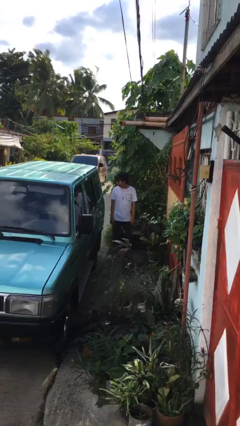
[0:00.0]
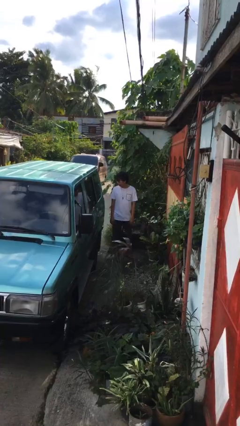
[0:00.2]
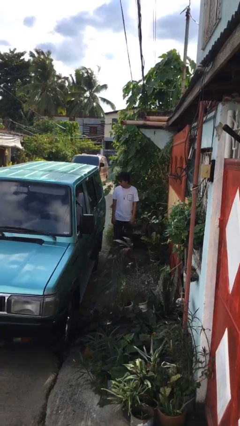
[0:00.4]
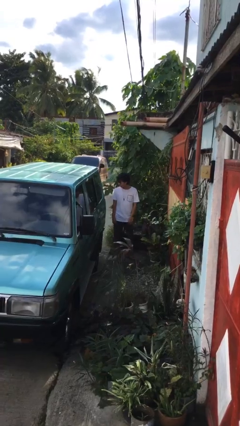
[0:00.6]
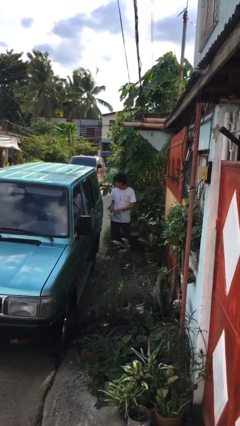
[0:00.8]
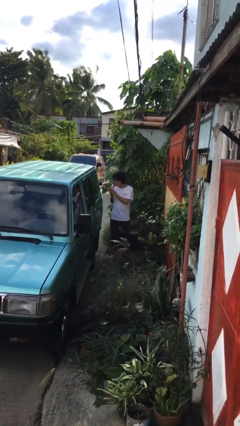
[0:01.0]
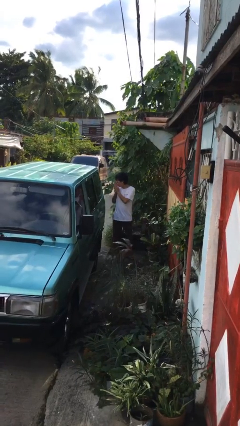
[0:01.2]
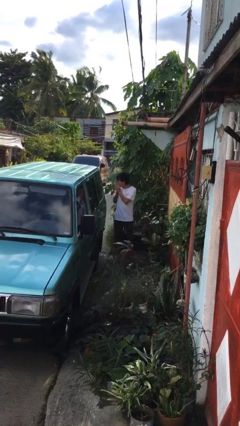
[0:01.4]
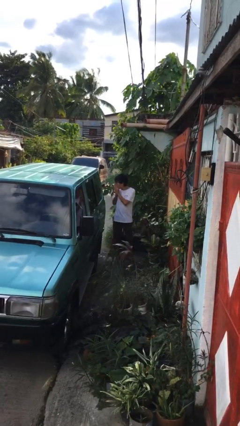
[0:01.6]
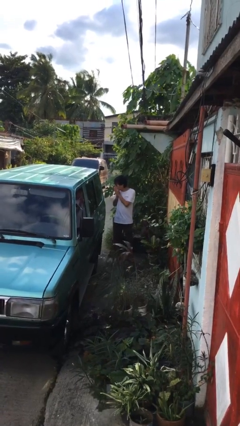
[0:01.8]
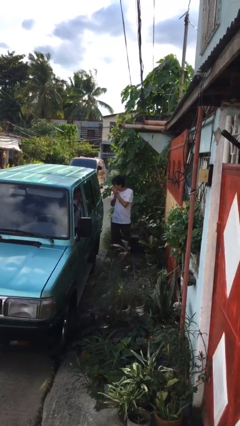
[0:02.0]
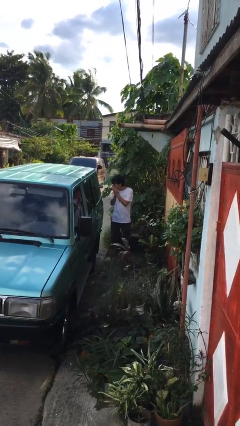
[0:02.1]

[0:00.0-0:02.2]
person blows into hands

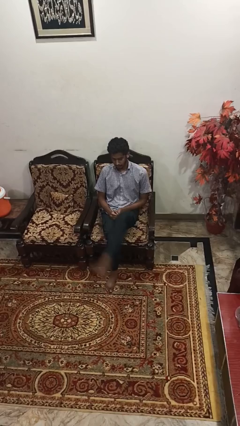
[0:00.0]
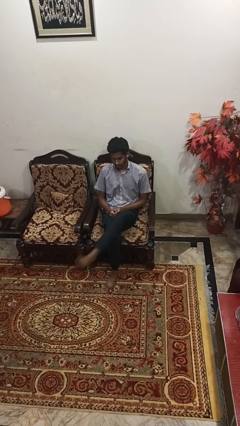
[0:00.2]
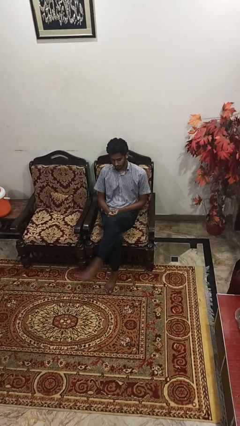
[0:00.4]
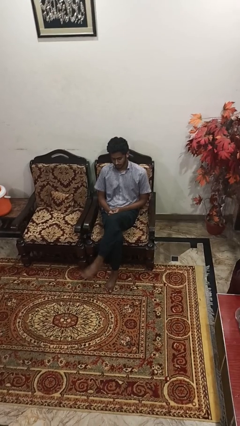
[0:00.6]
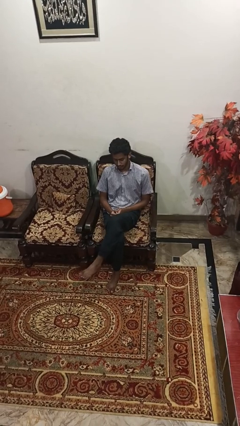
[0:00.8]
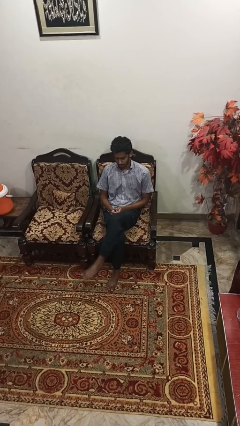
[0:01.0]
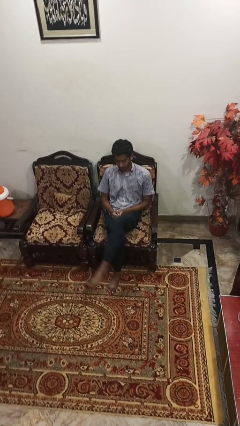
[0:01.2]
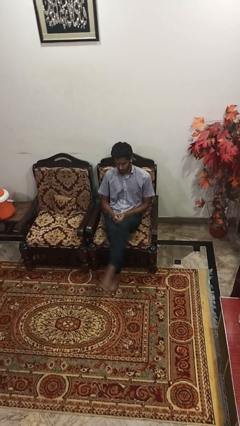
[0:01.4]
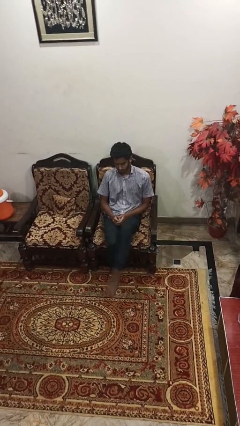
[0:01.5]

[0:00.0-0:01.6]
person crosses legs

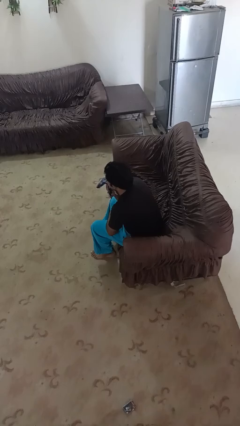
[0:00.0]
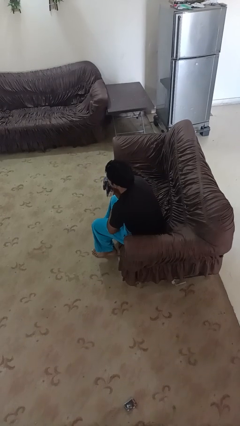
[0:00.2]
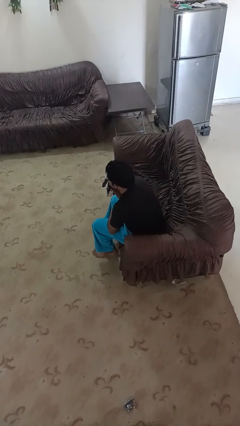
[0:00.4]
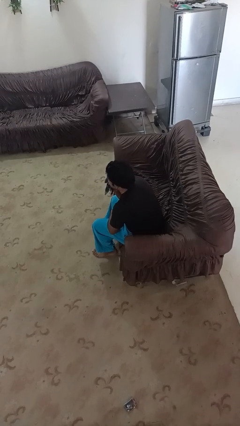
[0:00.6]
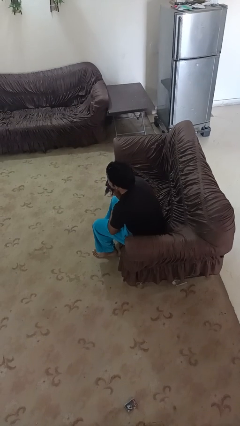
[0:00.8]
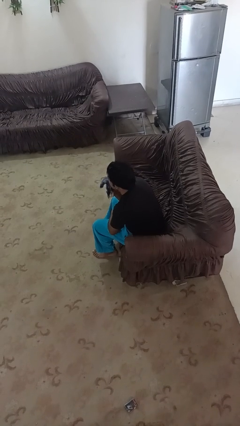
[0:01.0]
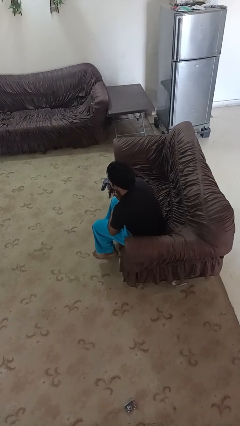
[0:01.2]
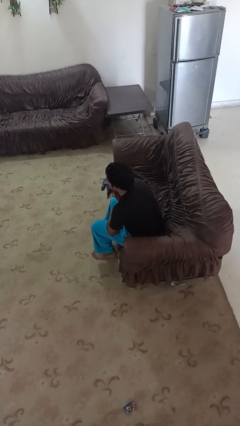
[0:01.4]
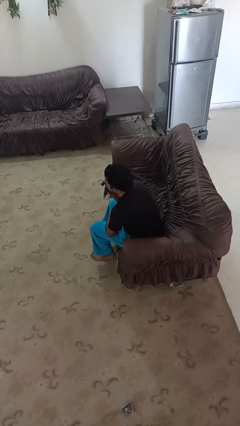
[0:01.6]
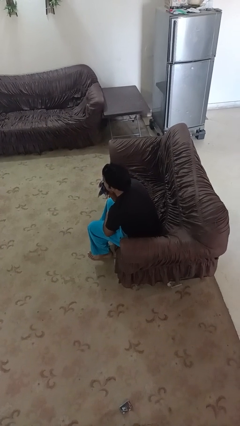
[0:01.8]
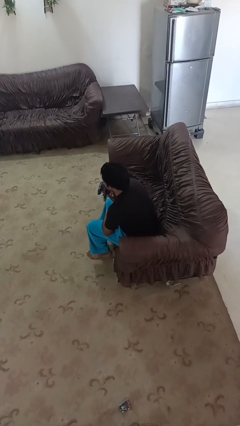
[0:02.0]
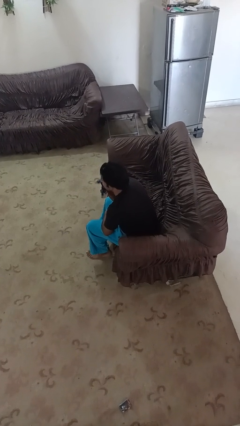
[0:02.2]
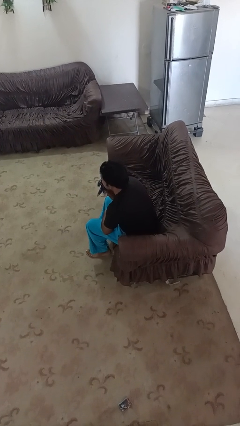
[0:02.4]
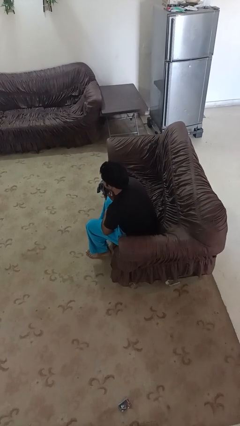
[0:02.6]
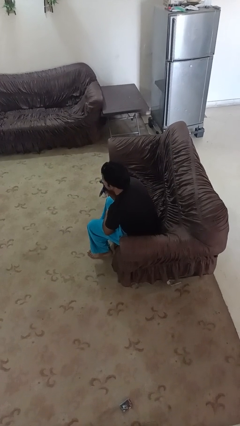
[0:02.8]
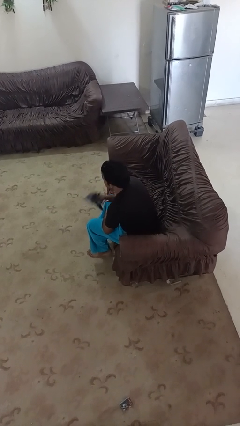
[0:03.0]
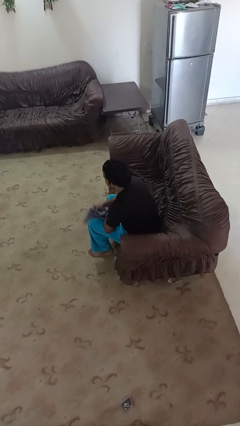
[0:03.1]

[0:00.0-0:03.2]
person wipes mouth with napkin

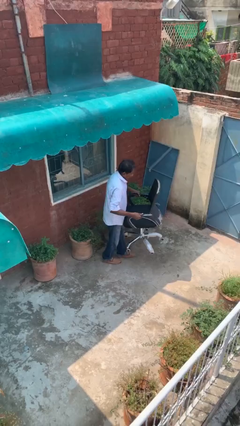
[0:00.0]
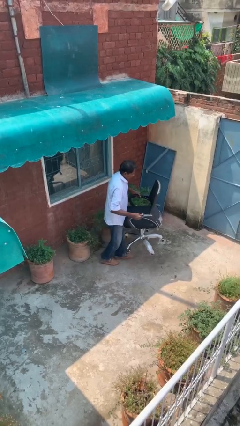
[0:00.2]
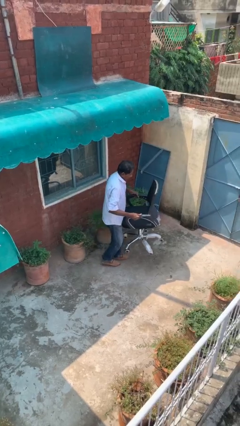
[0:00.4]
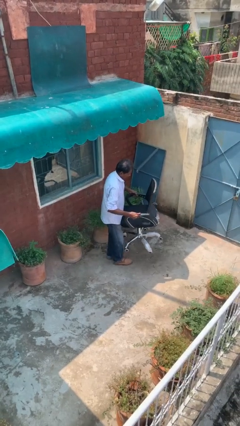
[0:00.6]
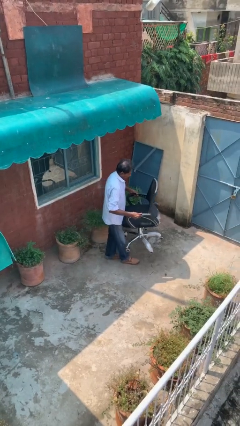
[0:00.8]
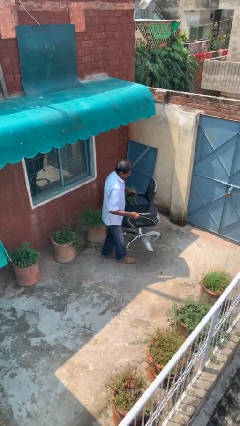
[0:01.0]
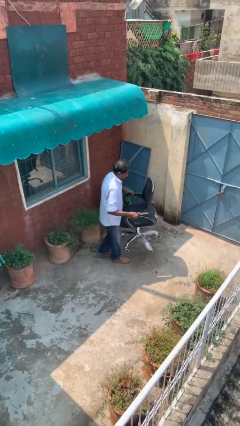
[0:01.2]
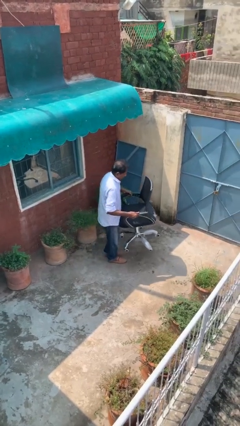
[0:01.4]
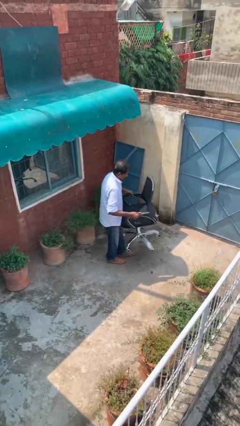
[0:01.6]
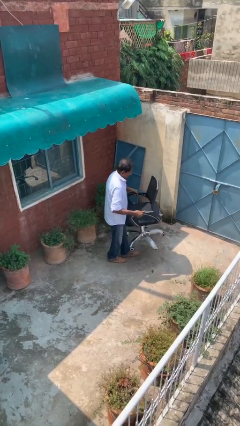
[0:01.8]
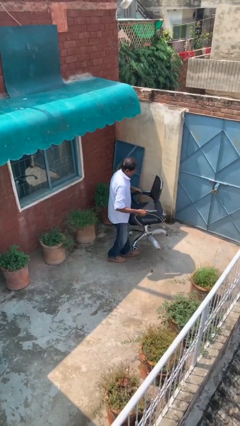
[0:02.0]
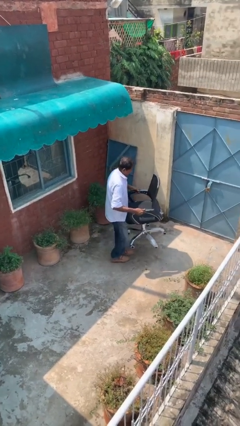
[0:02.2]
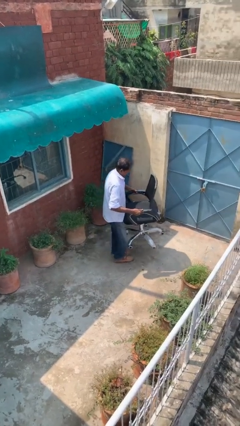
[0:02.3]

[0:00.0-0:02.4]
person carries heavy object

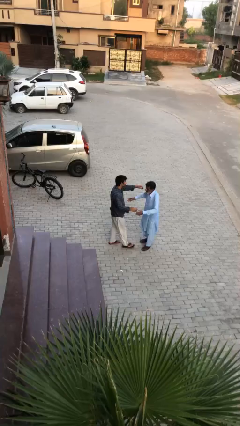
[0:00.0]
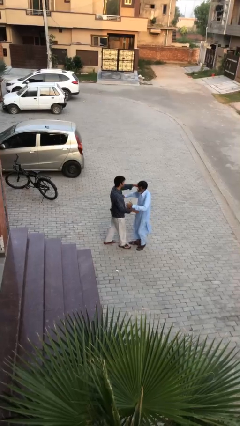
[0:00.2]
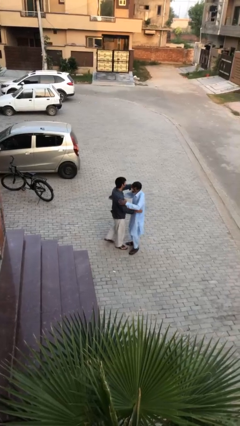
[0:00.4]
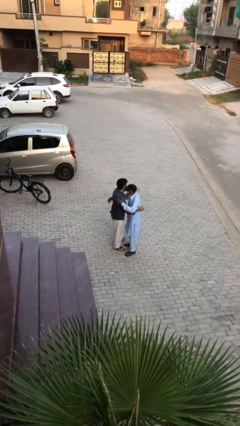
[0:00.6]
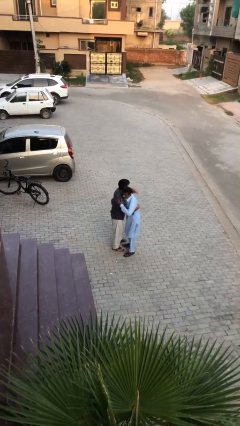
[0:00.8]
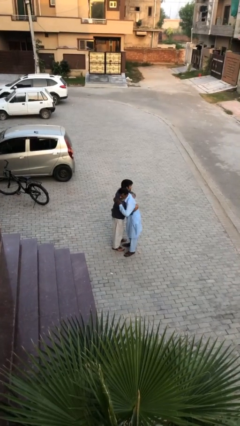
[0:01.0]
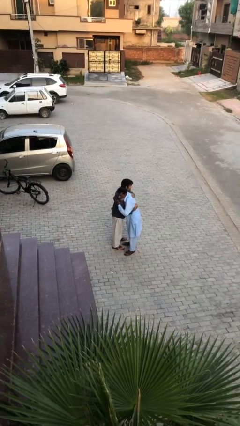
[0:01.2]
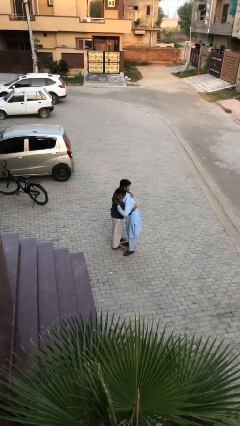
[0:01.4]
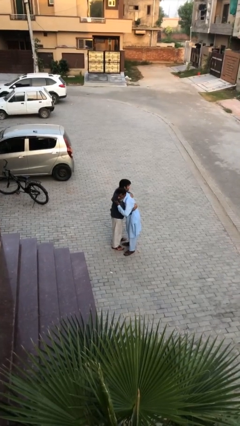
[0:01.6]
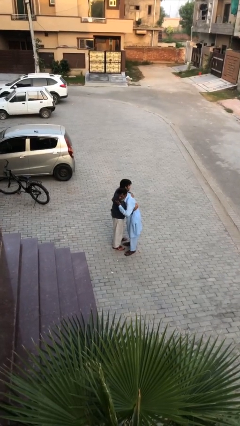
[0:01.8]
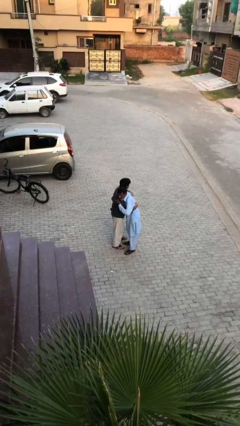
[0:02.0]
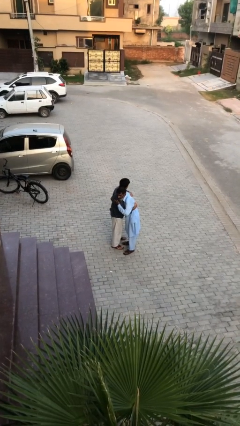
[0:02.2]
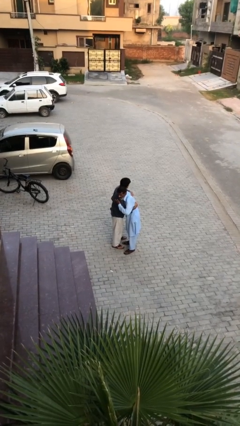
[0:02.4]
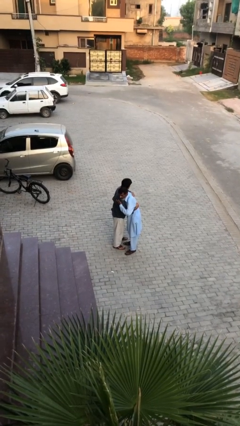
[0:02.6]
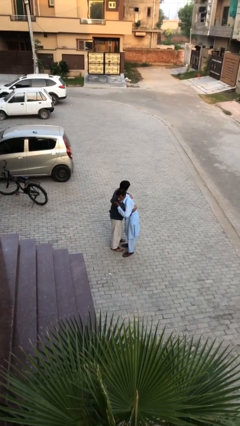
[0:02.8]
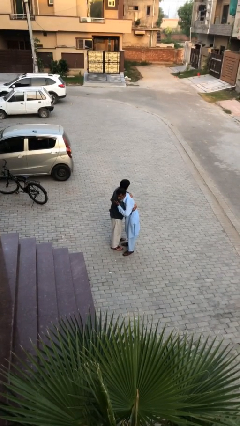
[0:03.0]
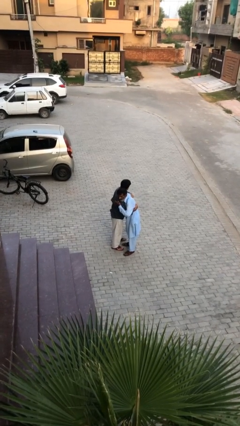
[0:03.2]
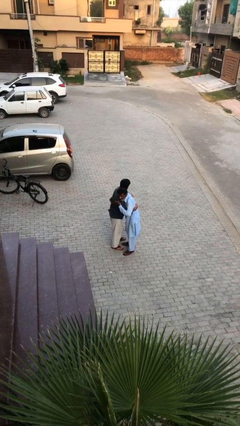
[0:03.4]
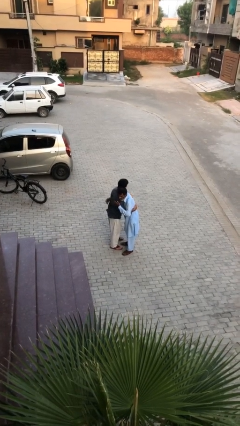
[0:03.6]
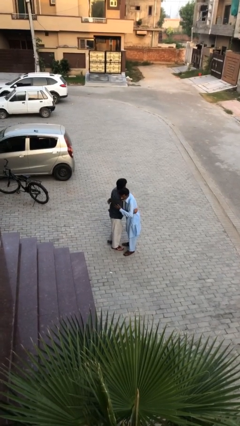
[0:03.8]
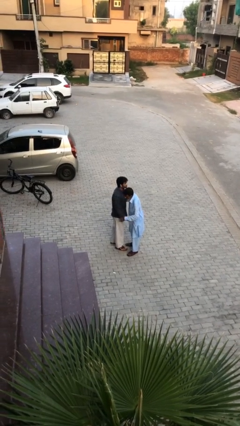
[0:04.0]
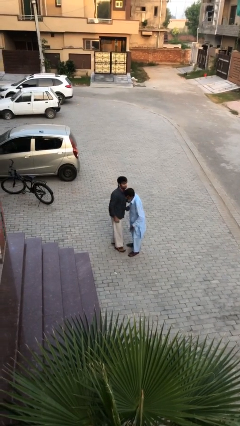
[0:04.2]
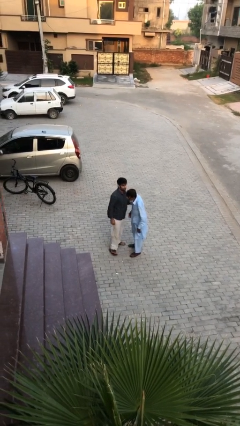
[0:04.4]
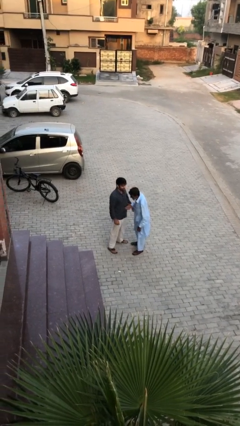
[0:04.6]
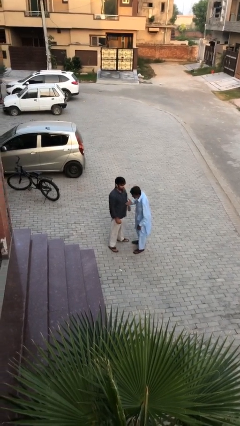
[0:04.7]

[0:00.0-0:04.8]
person embraces person

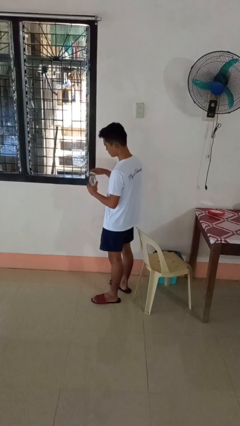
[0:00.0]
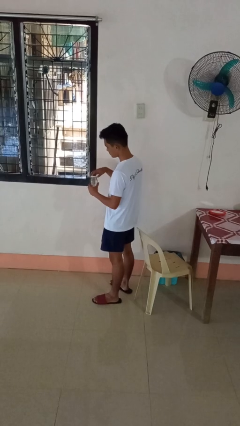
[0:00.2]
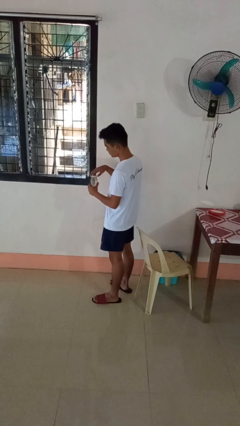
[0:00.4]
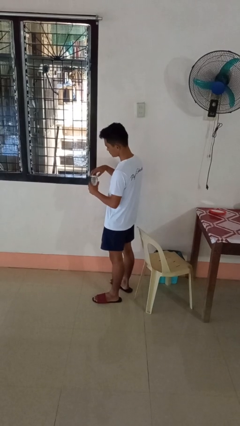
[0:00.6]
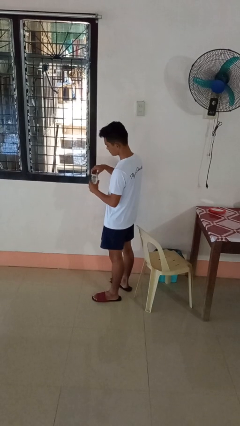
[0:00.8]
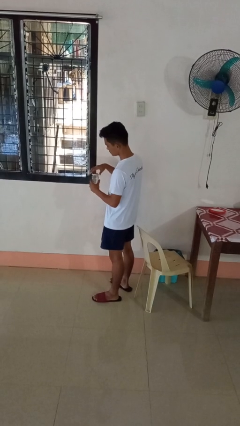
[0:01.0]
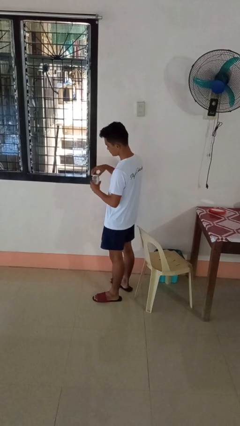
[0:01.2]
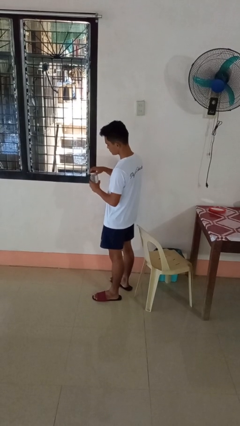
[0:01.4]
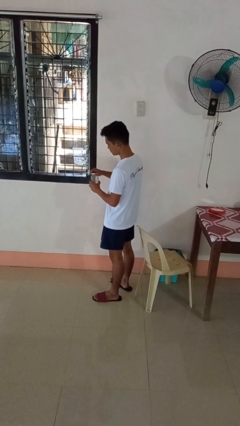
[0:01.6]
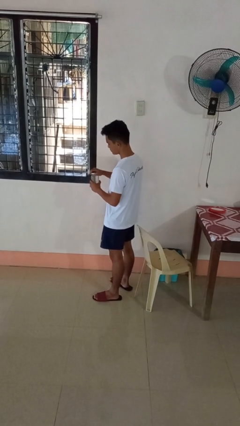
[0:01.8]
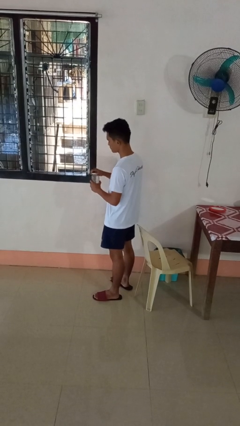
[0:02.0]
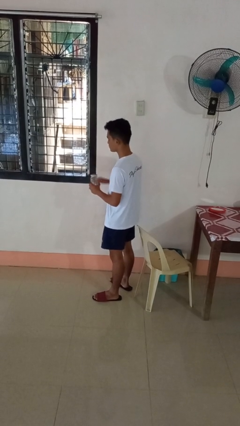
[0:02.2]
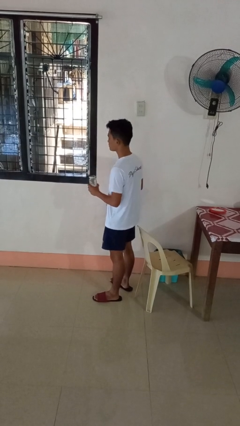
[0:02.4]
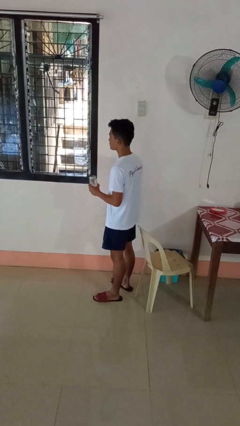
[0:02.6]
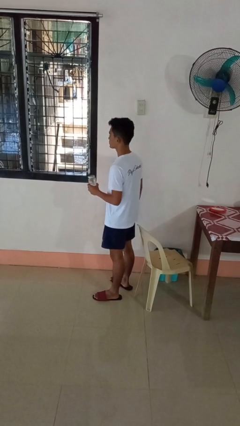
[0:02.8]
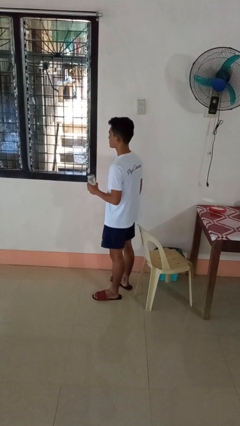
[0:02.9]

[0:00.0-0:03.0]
person closes jar
